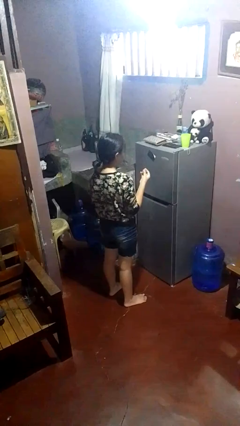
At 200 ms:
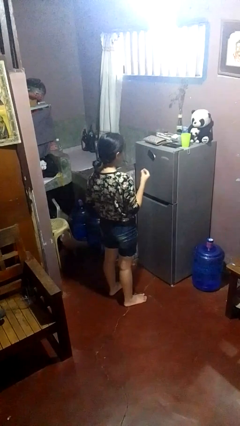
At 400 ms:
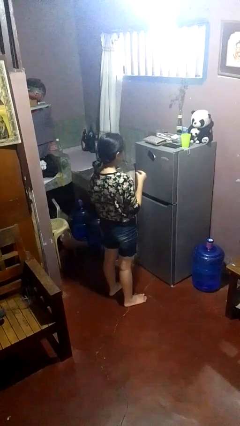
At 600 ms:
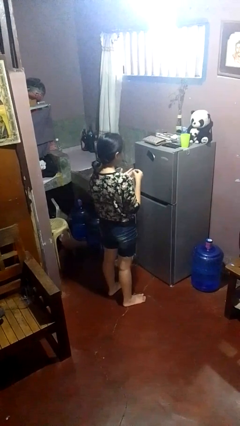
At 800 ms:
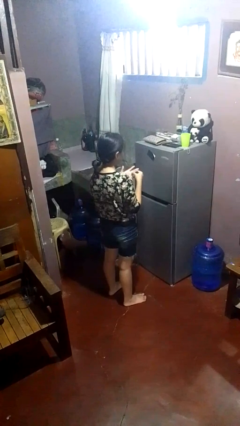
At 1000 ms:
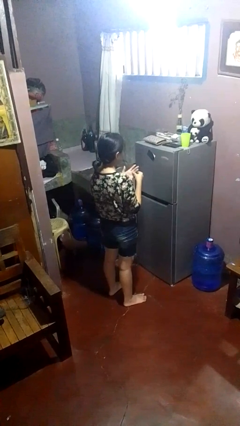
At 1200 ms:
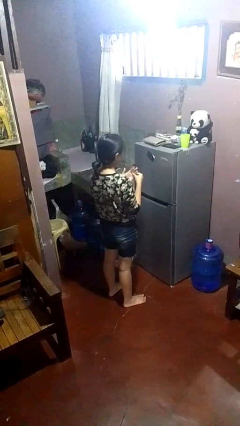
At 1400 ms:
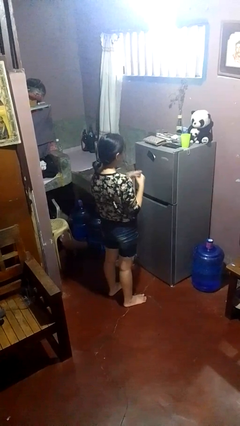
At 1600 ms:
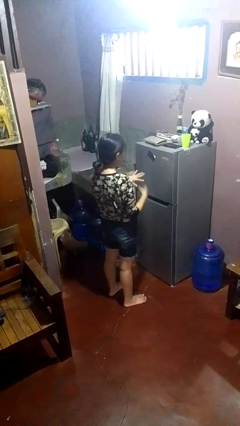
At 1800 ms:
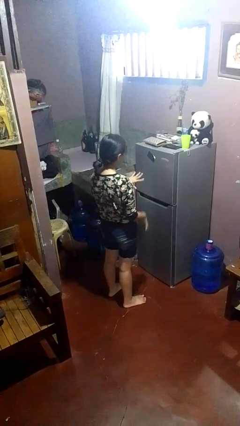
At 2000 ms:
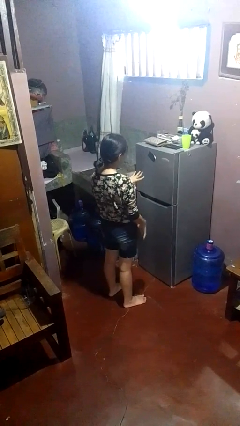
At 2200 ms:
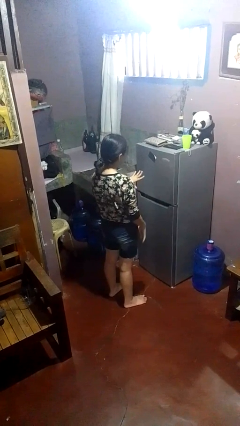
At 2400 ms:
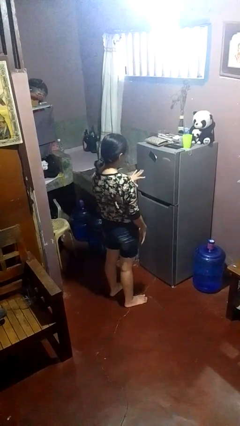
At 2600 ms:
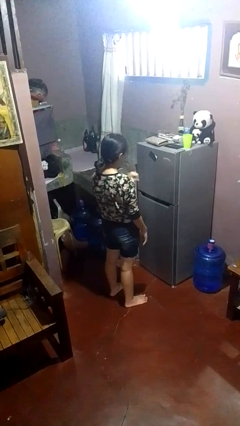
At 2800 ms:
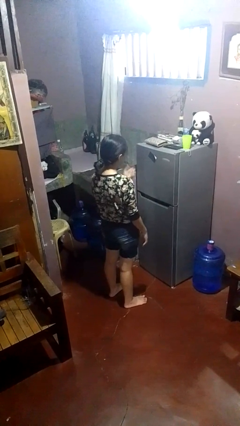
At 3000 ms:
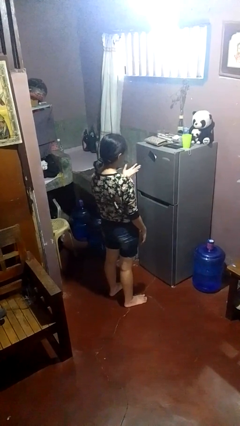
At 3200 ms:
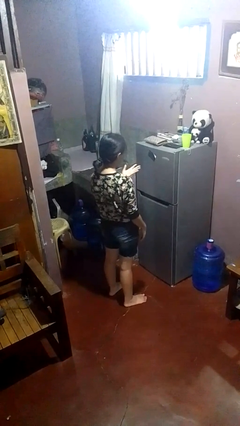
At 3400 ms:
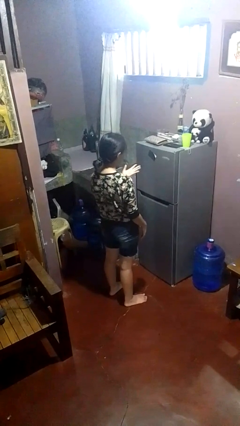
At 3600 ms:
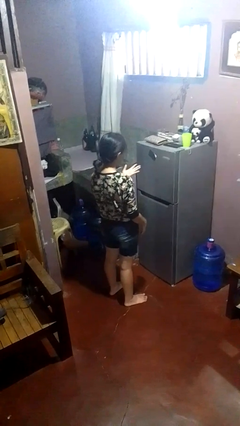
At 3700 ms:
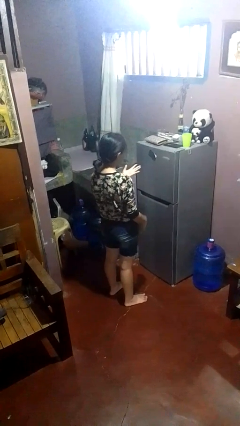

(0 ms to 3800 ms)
person puts on ring

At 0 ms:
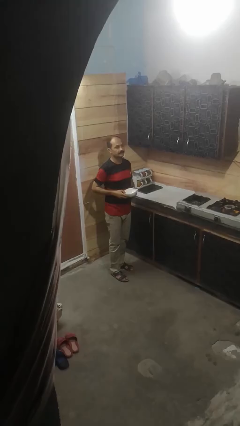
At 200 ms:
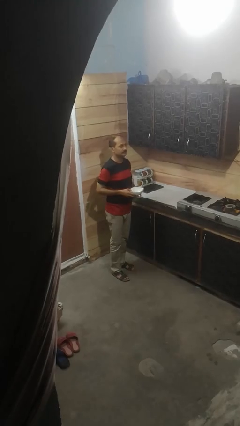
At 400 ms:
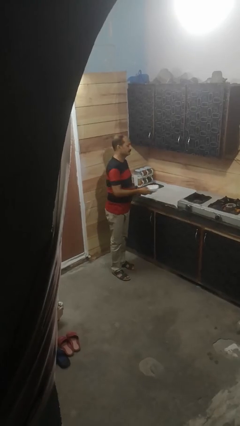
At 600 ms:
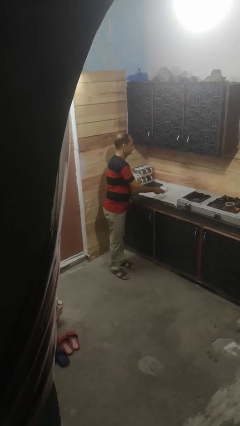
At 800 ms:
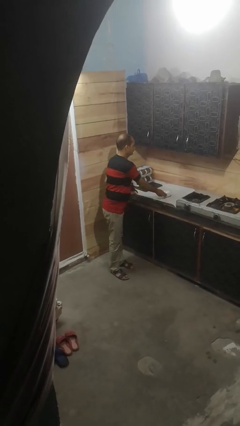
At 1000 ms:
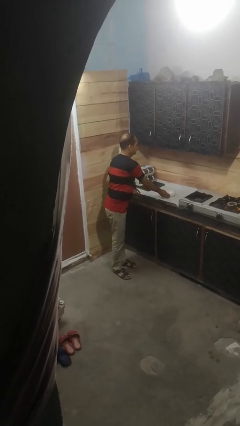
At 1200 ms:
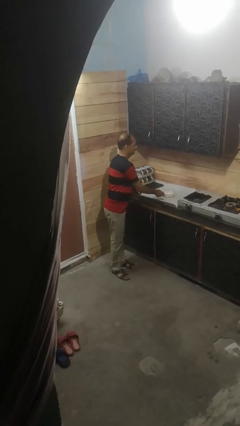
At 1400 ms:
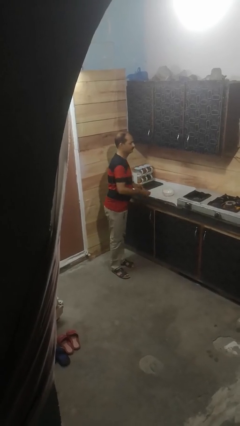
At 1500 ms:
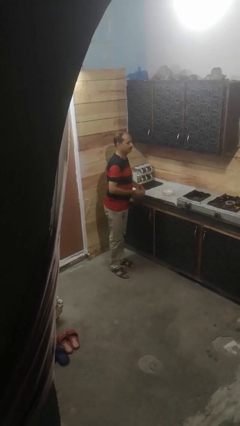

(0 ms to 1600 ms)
person puts down object on countertop

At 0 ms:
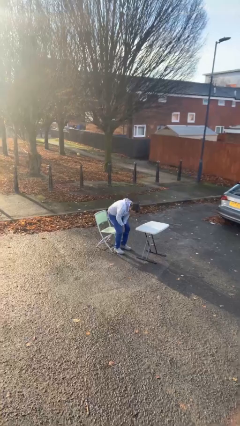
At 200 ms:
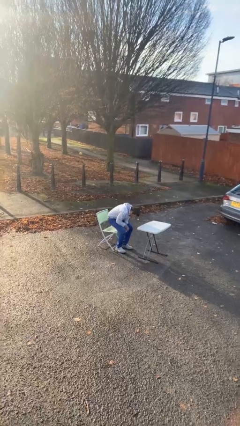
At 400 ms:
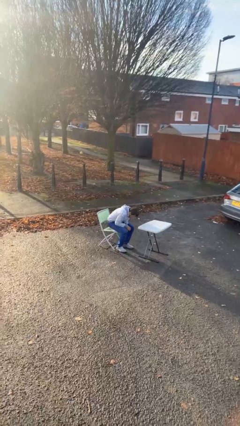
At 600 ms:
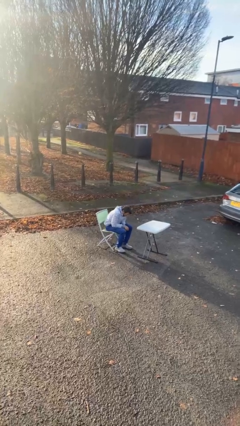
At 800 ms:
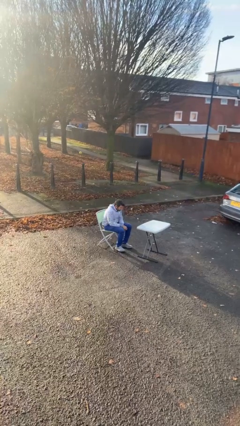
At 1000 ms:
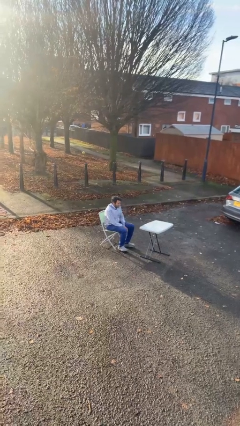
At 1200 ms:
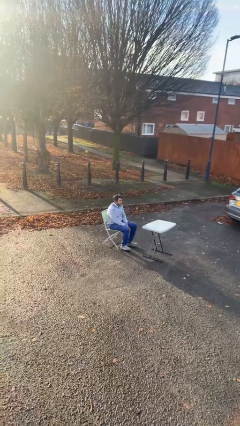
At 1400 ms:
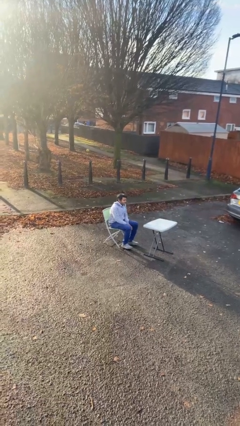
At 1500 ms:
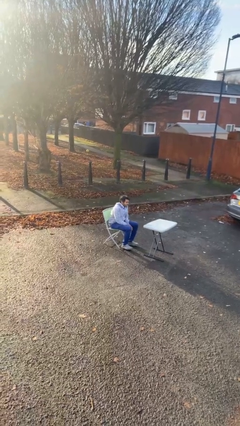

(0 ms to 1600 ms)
person sits down

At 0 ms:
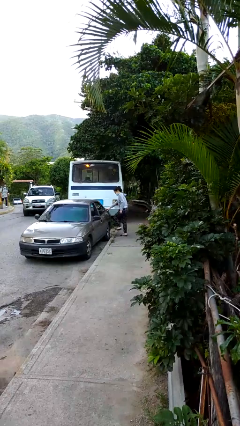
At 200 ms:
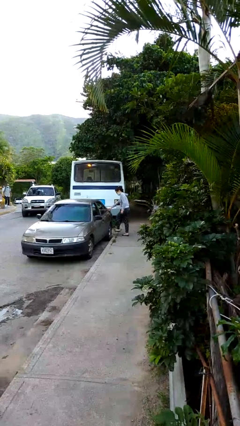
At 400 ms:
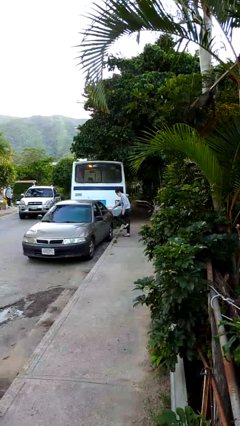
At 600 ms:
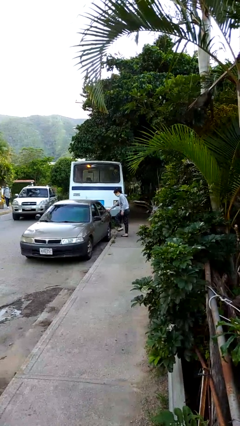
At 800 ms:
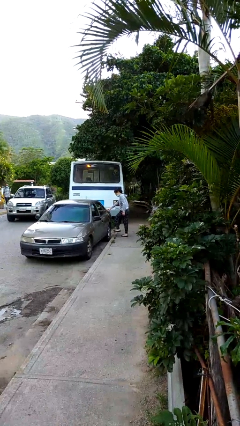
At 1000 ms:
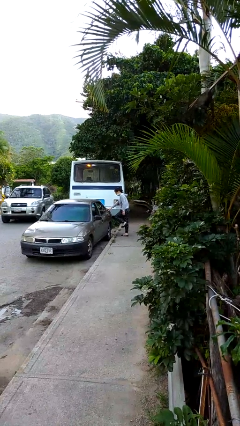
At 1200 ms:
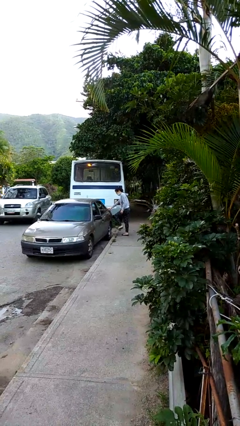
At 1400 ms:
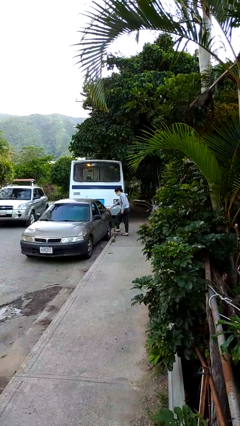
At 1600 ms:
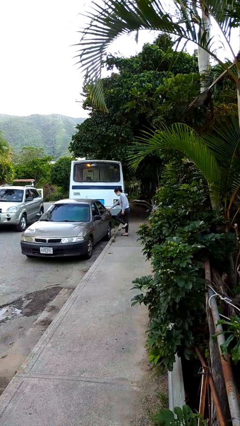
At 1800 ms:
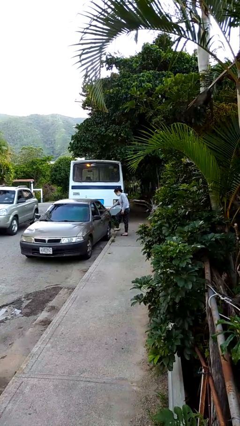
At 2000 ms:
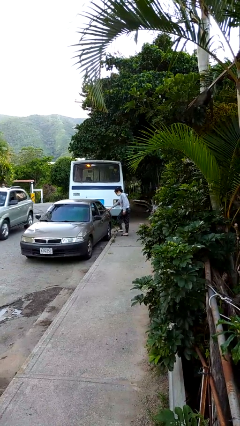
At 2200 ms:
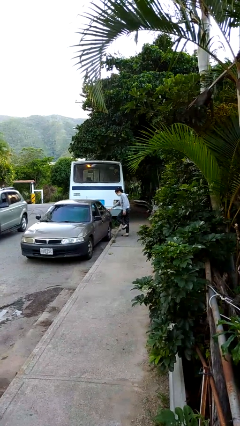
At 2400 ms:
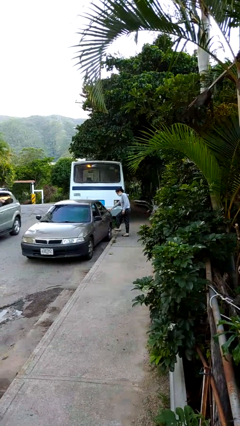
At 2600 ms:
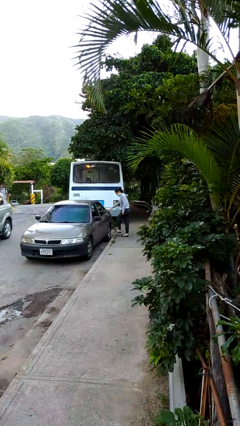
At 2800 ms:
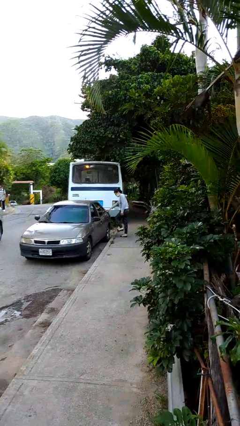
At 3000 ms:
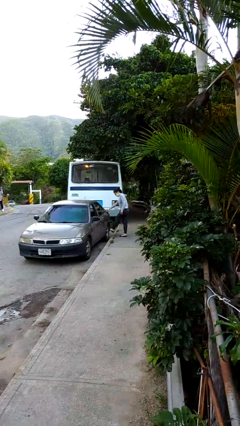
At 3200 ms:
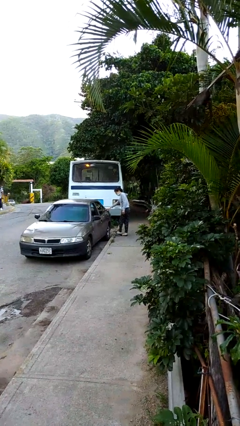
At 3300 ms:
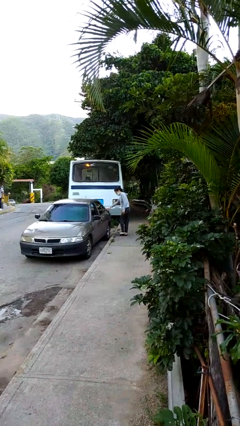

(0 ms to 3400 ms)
person kicks car tires

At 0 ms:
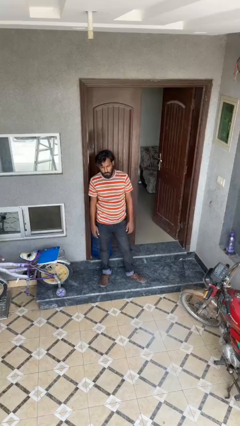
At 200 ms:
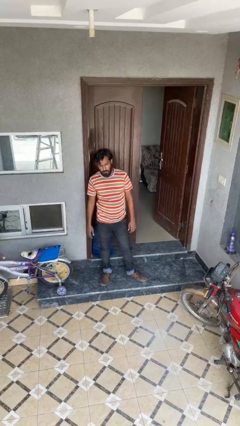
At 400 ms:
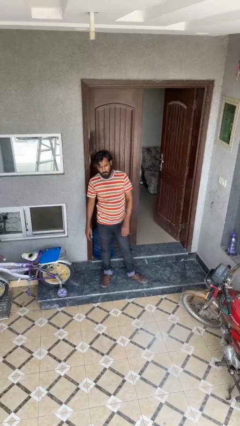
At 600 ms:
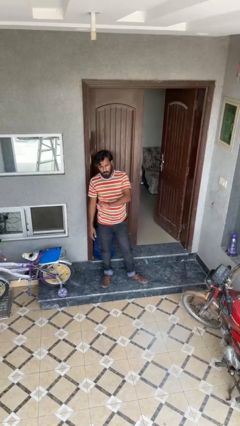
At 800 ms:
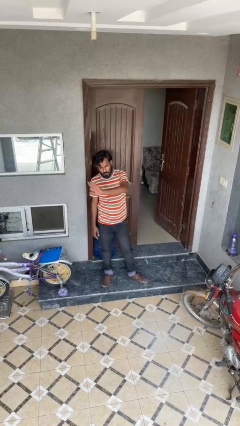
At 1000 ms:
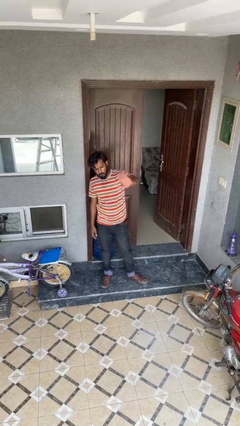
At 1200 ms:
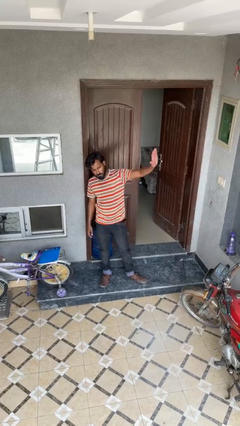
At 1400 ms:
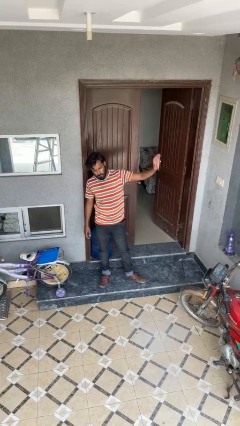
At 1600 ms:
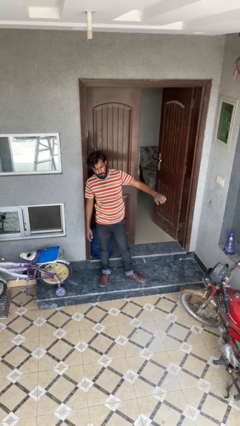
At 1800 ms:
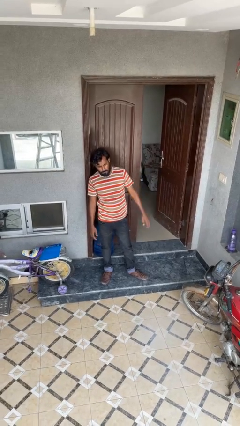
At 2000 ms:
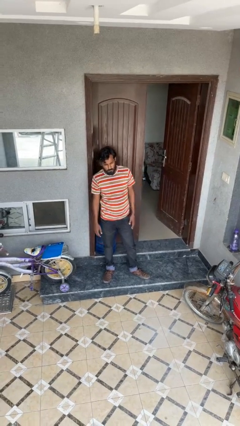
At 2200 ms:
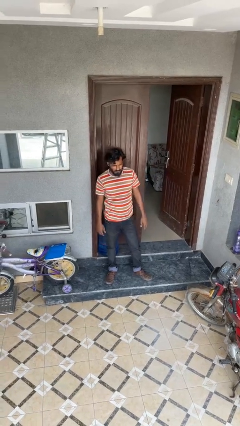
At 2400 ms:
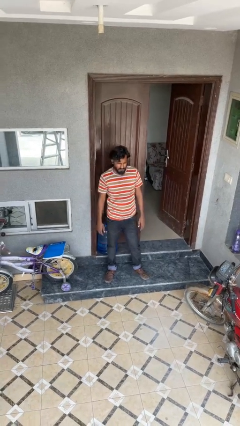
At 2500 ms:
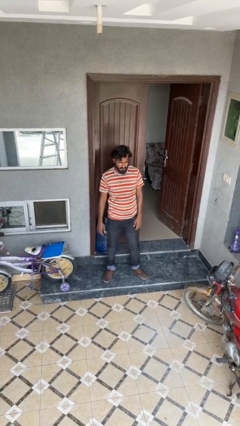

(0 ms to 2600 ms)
person gestures swipe left

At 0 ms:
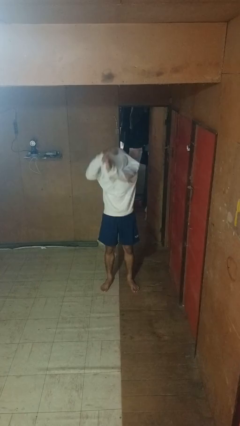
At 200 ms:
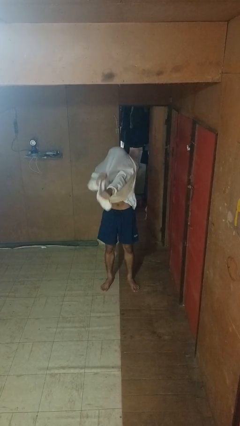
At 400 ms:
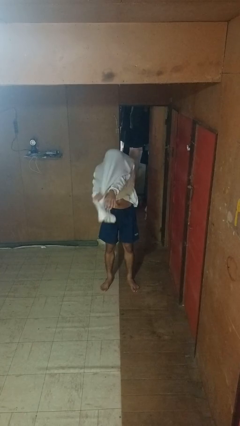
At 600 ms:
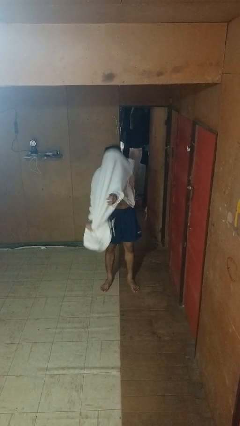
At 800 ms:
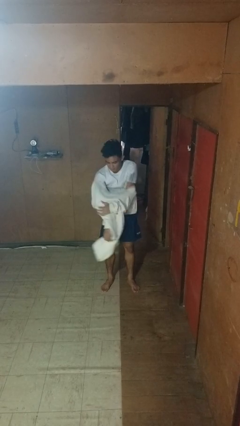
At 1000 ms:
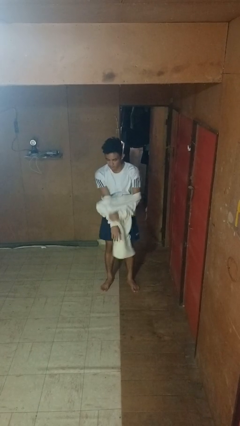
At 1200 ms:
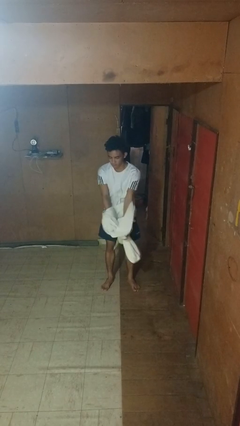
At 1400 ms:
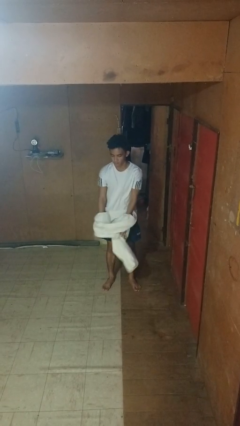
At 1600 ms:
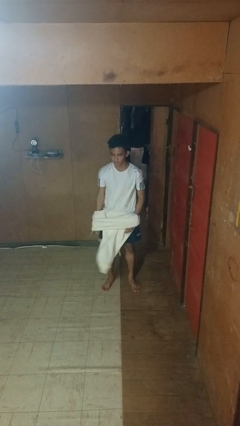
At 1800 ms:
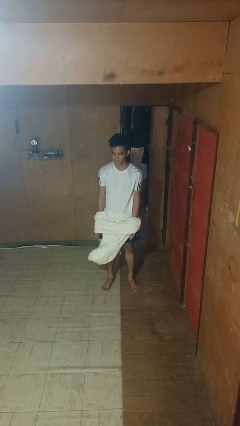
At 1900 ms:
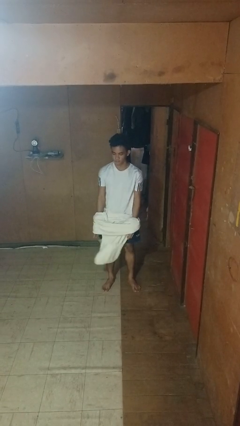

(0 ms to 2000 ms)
person takes off hoodie

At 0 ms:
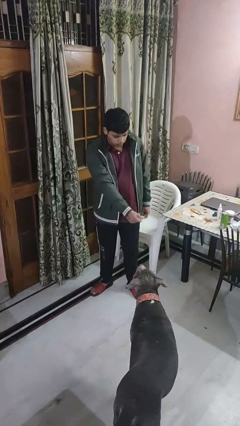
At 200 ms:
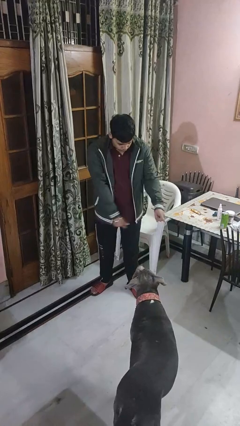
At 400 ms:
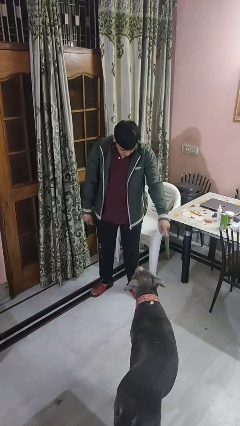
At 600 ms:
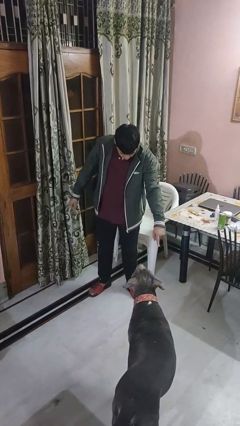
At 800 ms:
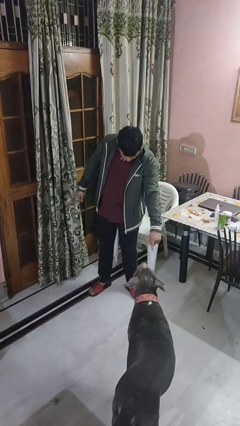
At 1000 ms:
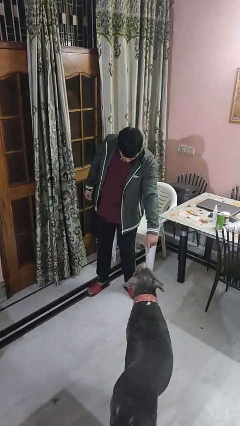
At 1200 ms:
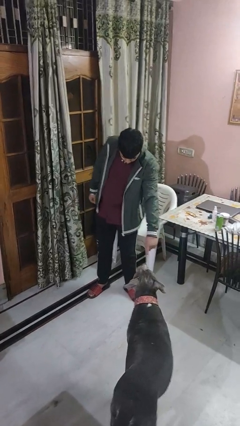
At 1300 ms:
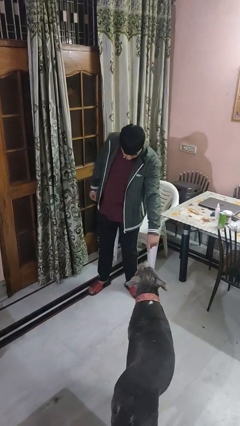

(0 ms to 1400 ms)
person points to dog

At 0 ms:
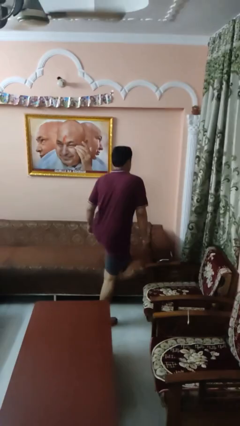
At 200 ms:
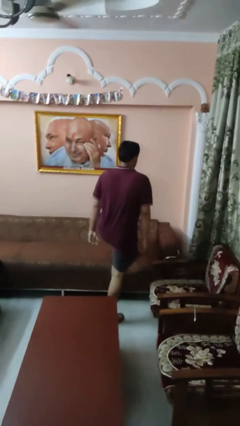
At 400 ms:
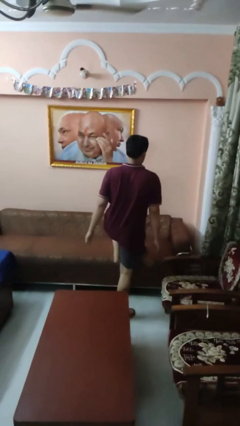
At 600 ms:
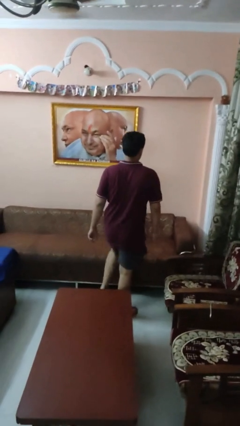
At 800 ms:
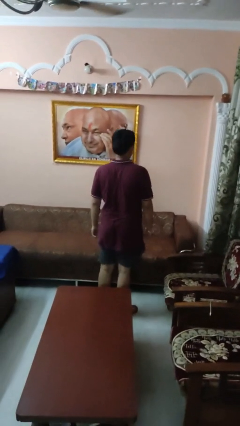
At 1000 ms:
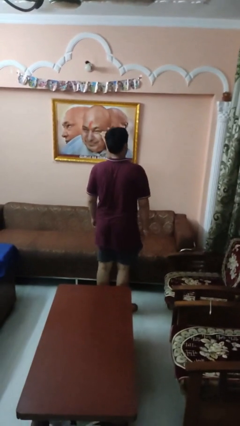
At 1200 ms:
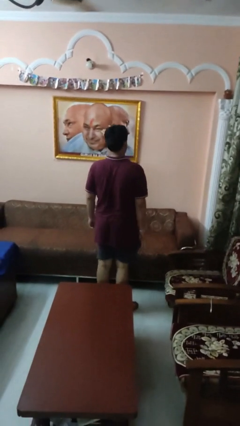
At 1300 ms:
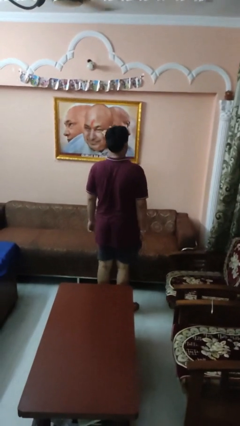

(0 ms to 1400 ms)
person climbs off couch
